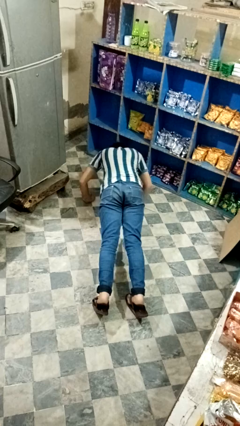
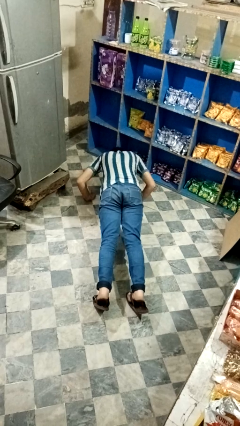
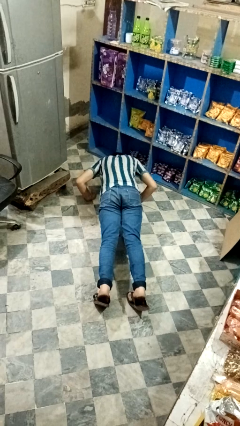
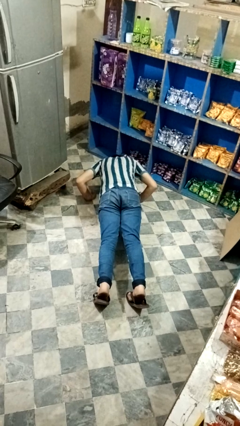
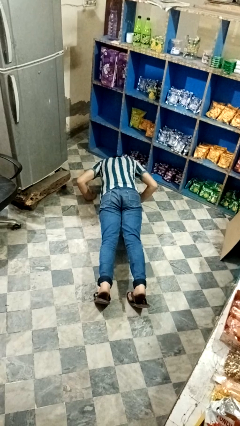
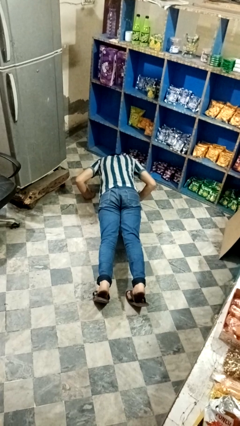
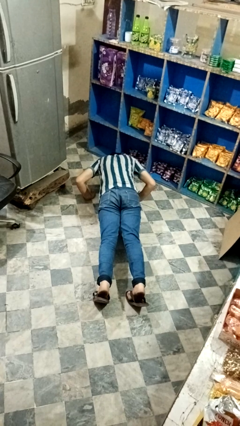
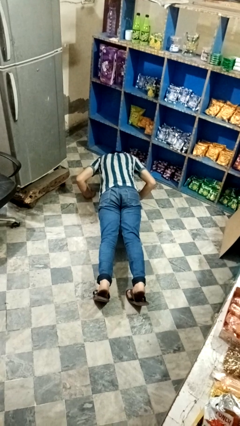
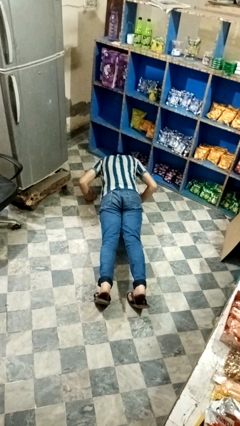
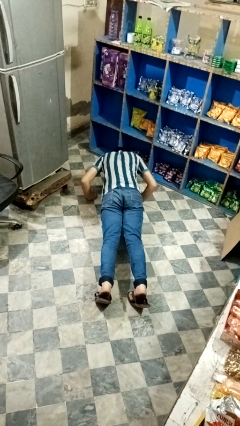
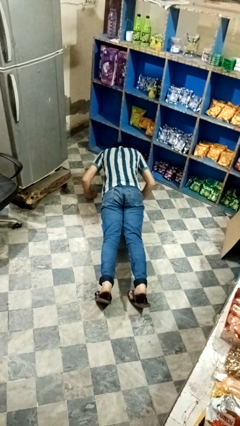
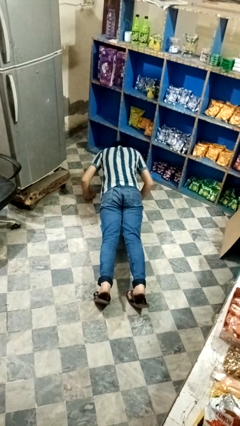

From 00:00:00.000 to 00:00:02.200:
person exercises with pushup

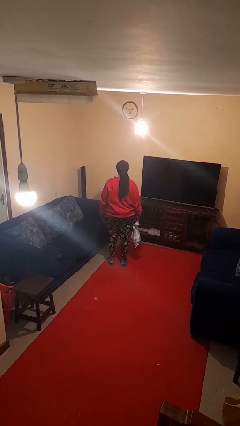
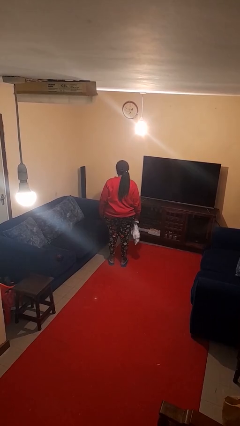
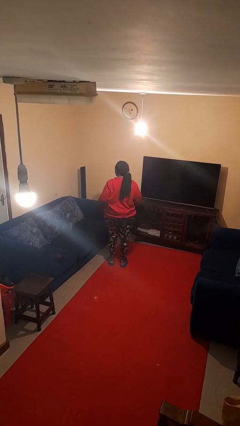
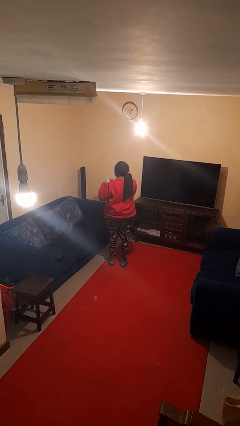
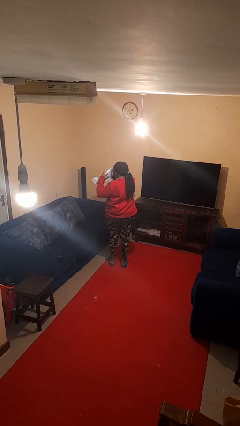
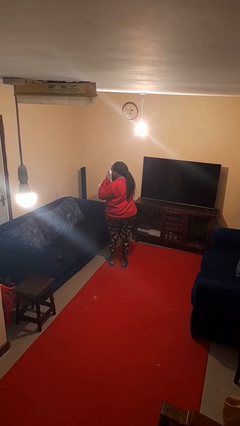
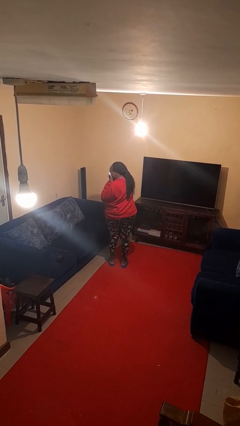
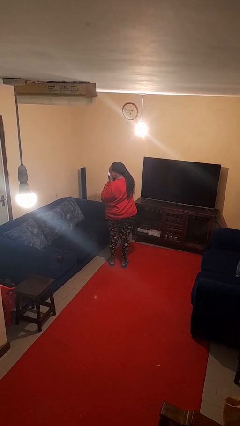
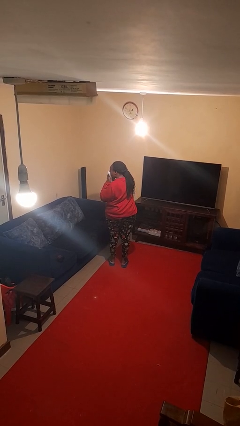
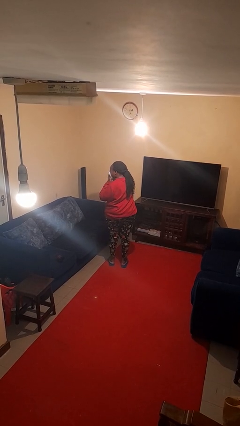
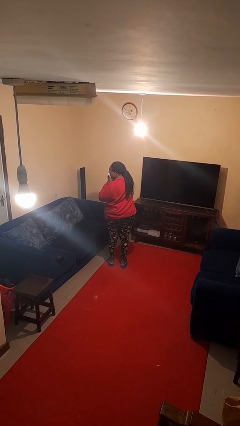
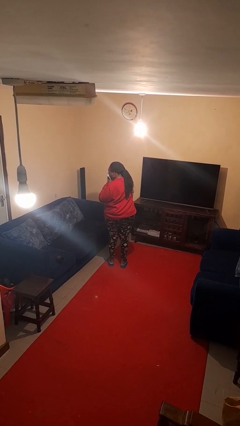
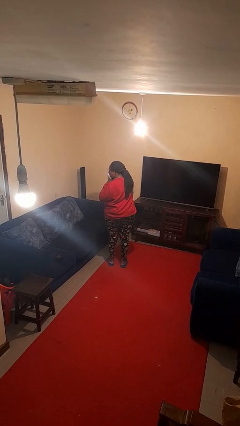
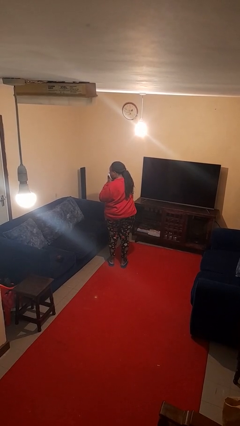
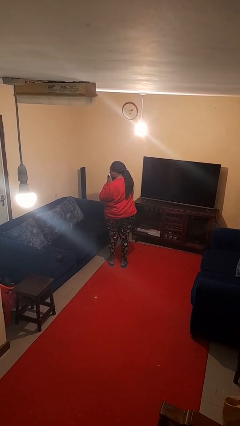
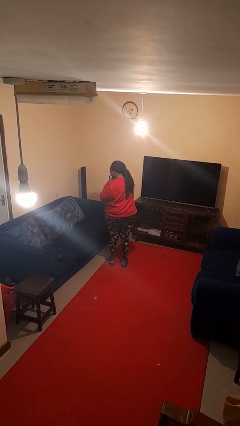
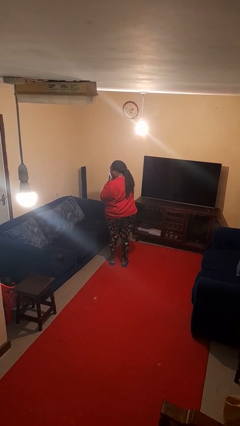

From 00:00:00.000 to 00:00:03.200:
person blows nose

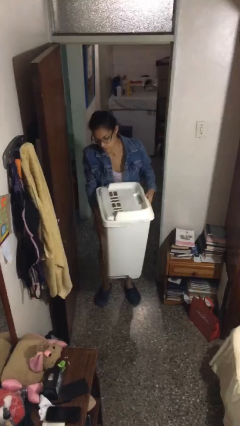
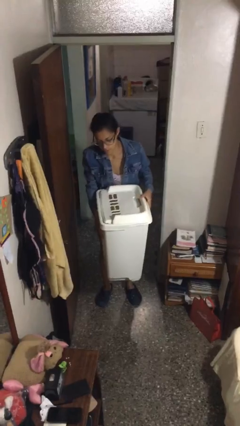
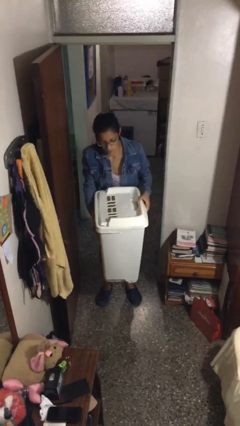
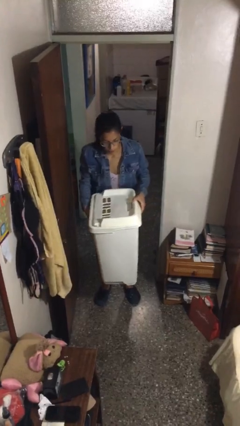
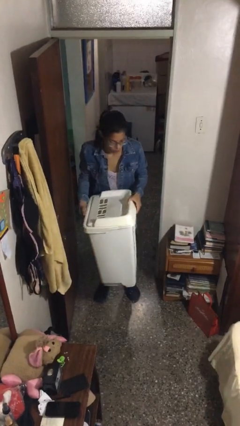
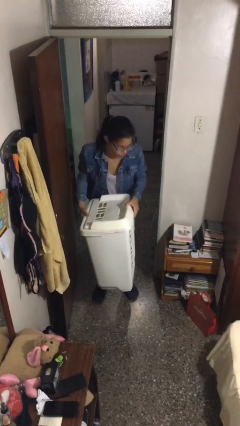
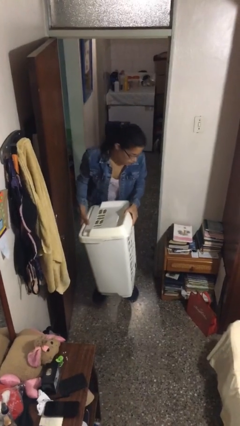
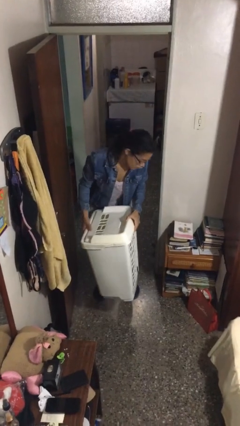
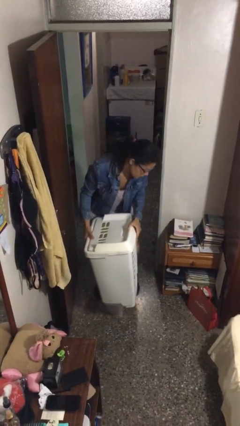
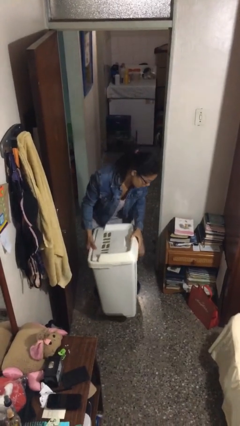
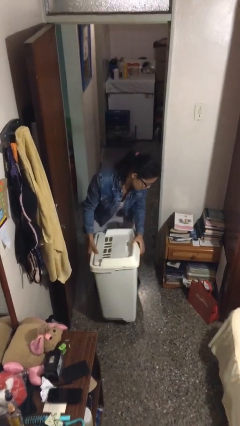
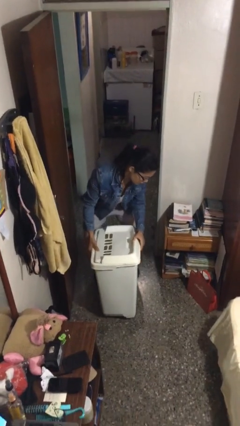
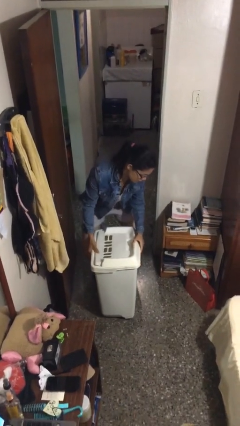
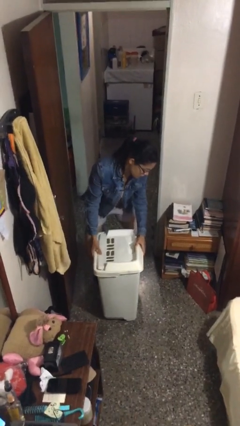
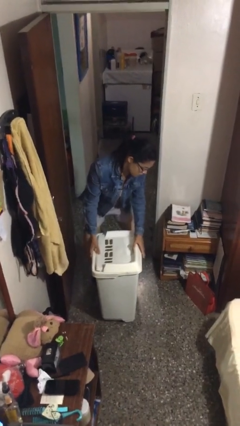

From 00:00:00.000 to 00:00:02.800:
person puts down object on floor

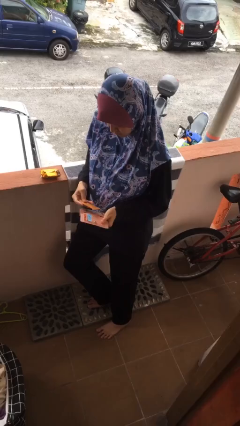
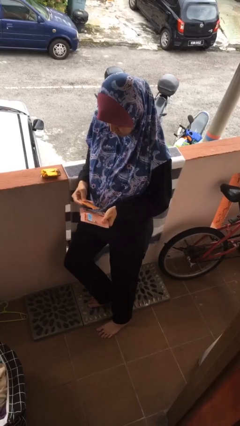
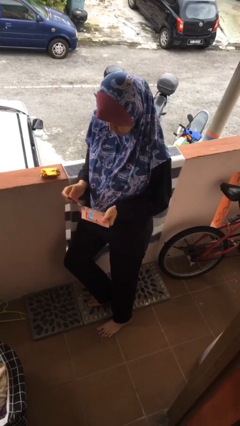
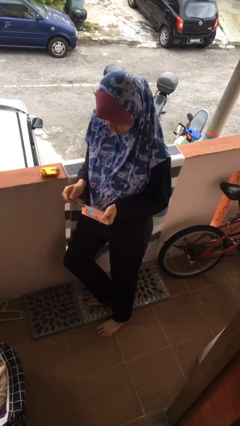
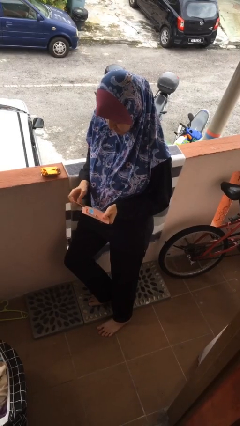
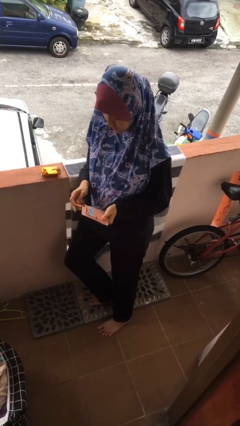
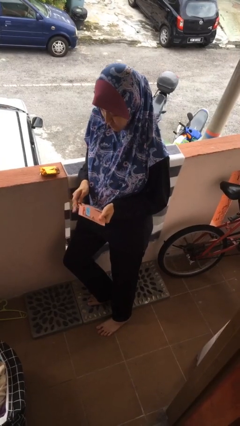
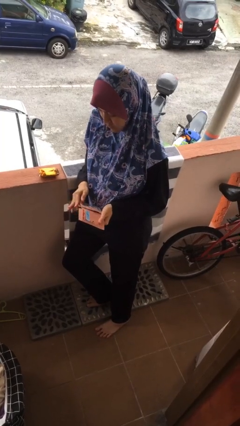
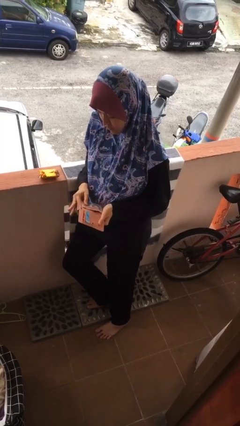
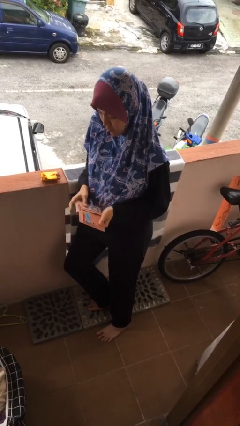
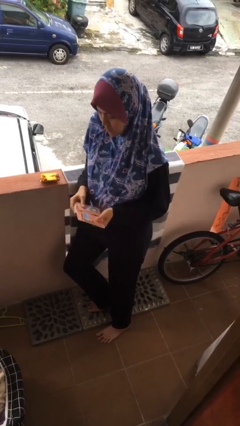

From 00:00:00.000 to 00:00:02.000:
person puts object into purse

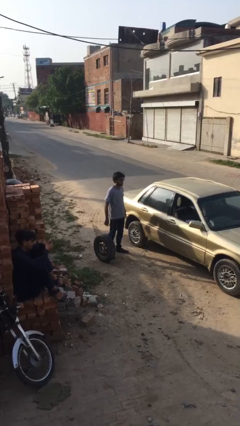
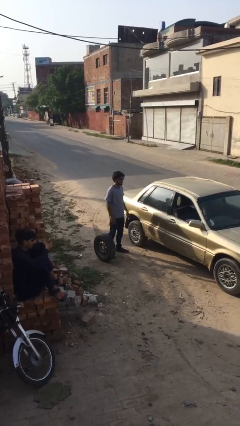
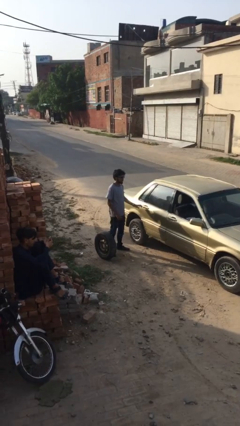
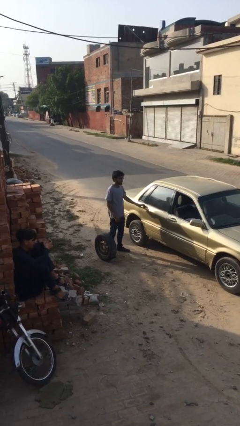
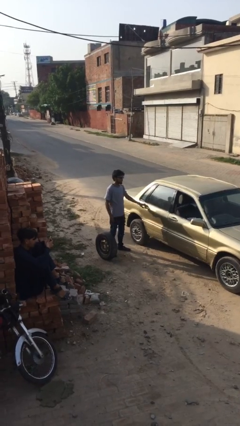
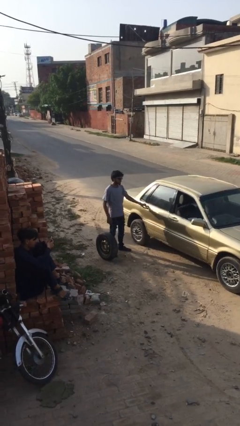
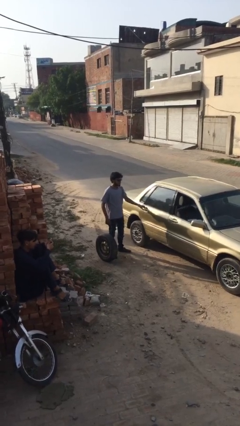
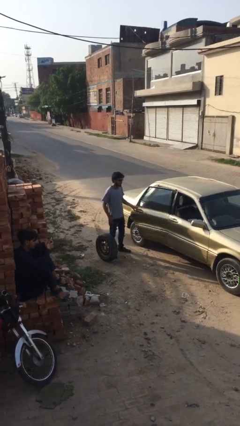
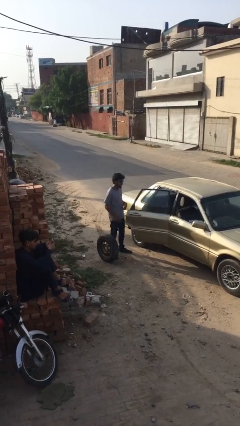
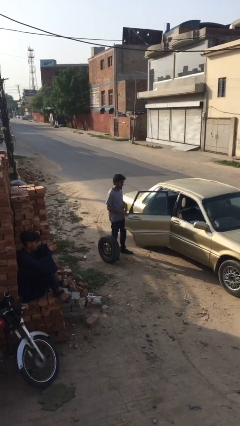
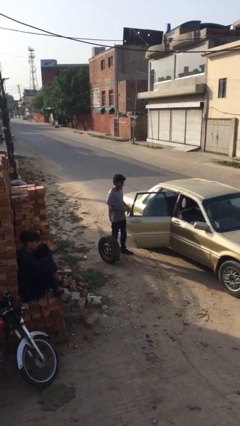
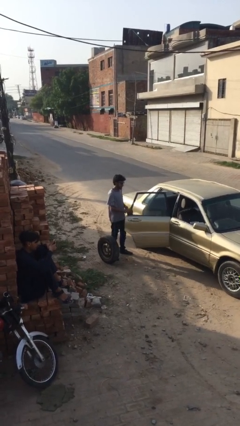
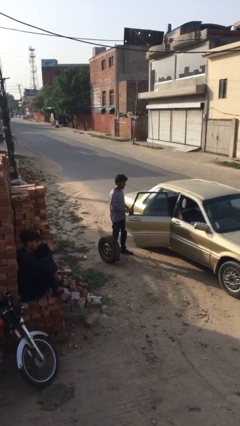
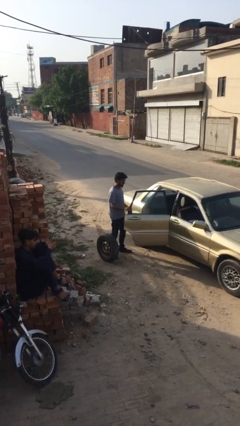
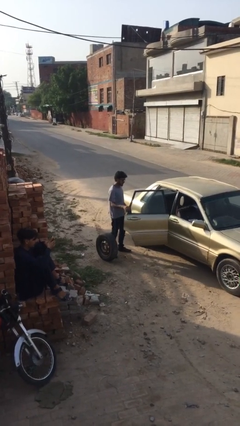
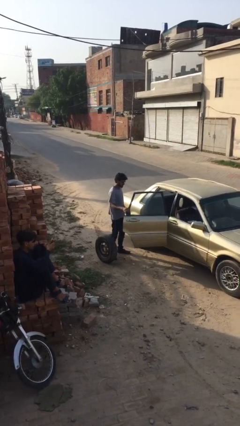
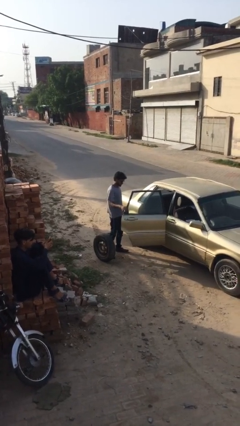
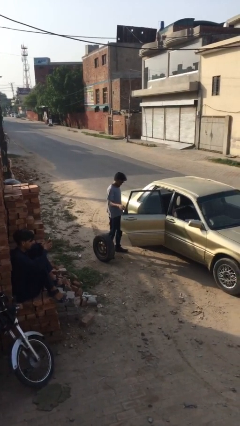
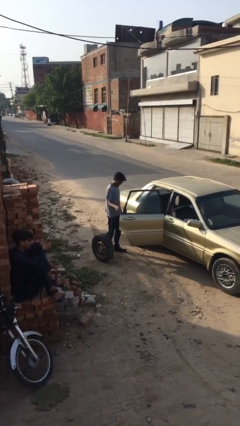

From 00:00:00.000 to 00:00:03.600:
person opens car door

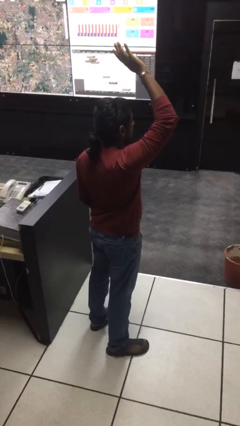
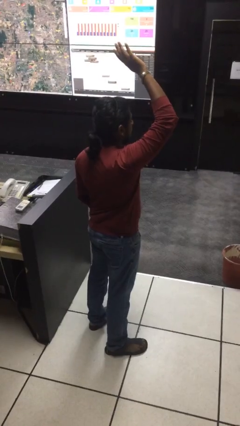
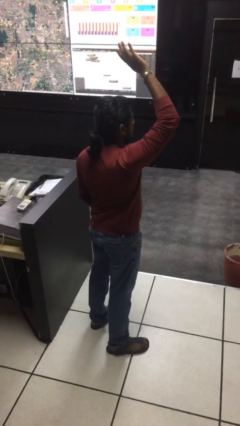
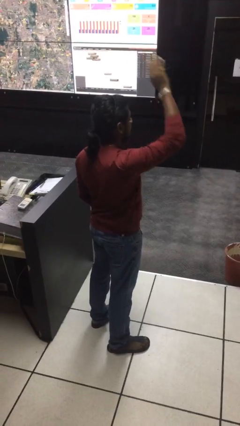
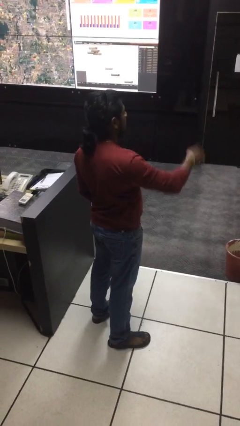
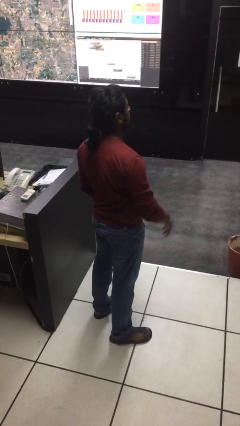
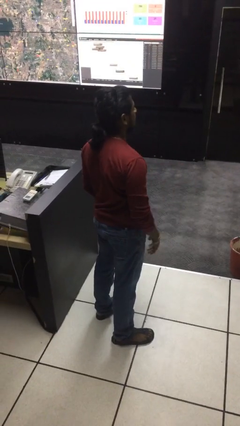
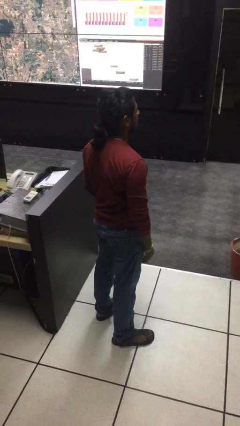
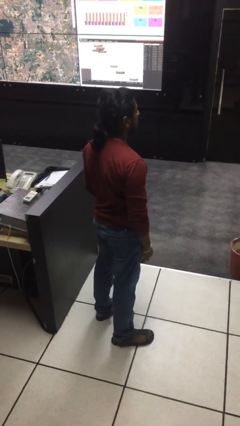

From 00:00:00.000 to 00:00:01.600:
person gestures lower hand

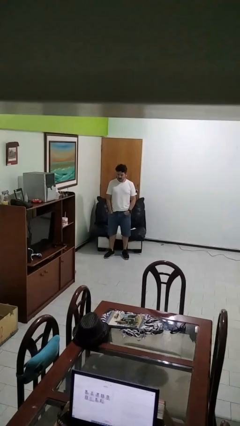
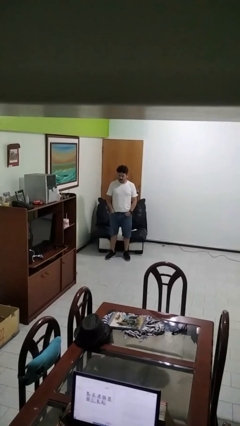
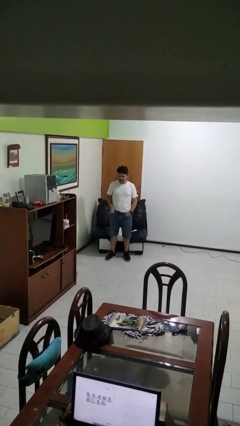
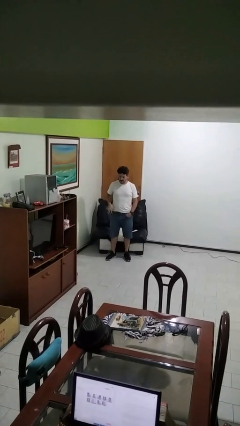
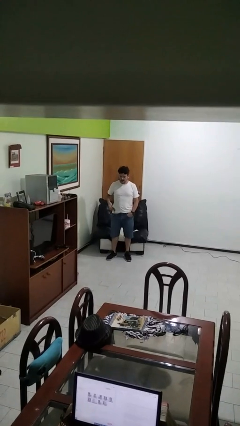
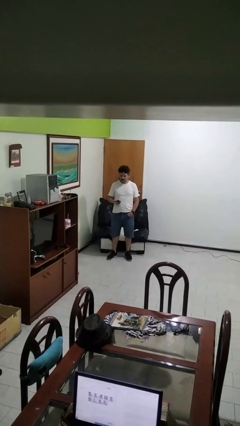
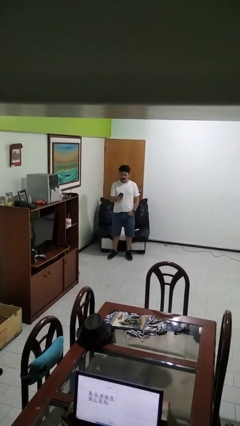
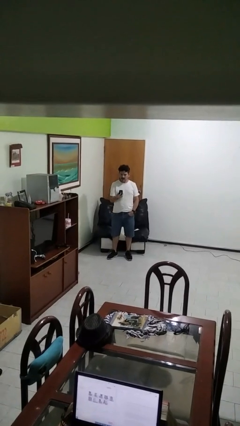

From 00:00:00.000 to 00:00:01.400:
person takes phone from pocket
